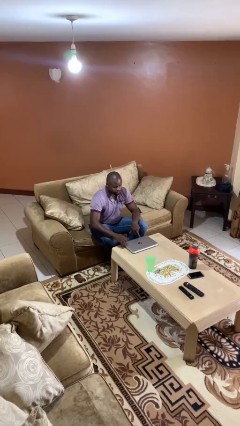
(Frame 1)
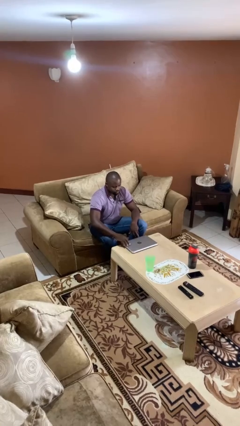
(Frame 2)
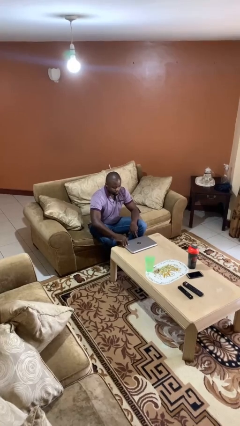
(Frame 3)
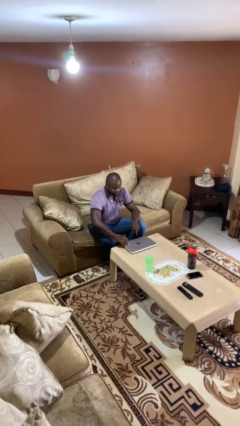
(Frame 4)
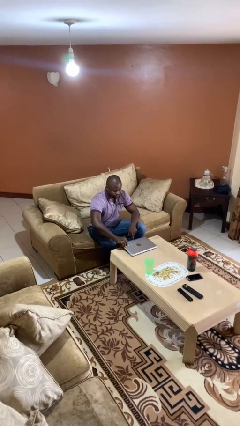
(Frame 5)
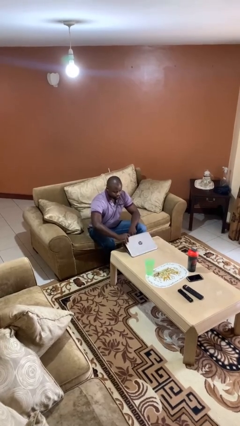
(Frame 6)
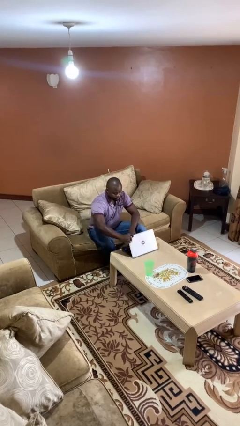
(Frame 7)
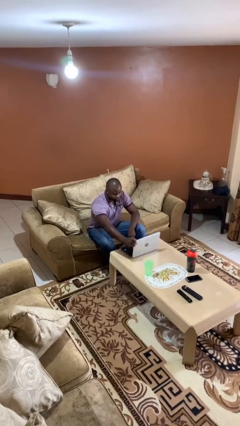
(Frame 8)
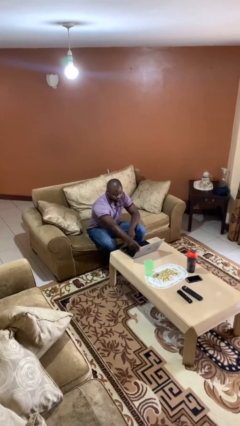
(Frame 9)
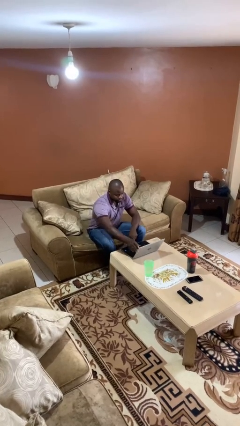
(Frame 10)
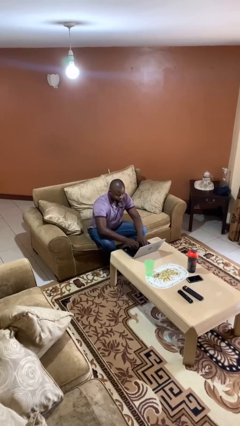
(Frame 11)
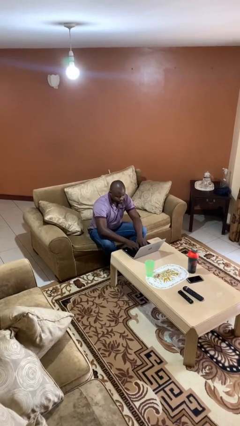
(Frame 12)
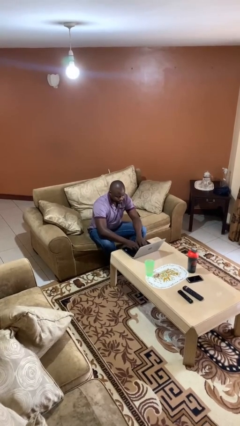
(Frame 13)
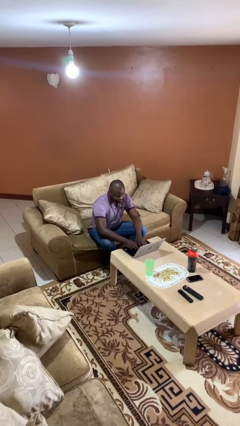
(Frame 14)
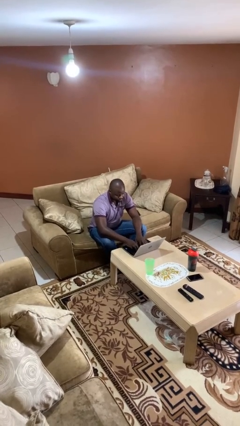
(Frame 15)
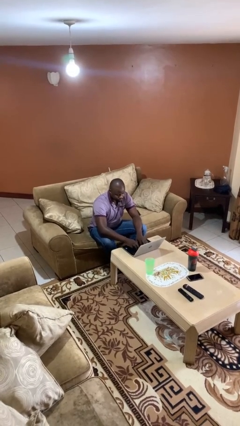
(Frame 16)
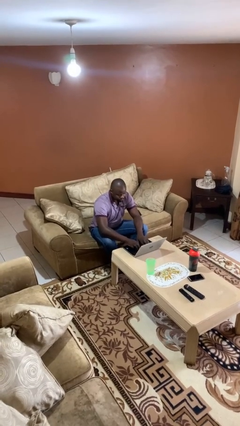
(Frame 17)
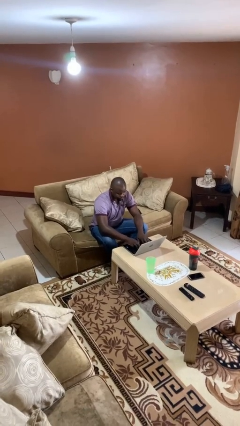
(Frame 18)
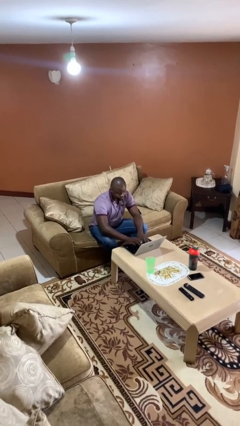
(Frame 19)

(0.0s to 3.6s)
person interacts with laptop

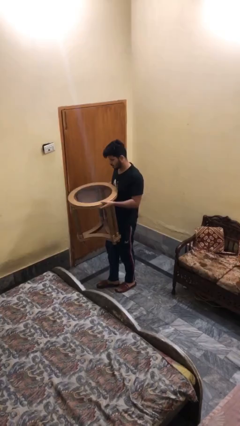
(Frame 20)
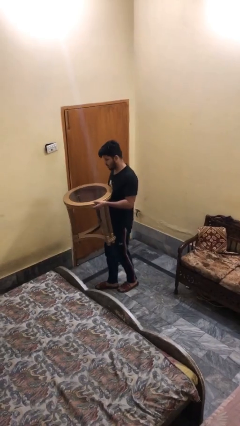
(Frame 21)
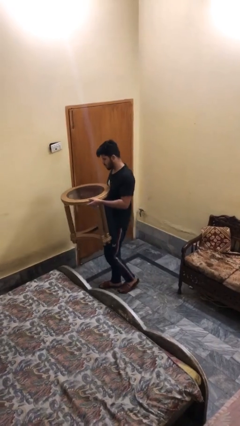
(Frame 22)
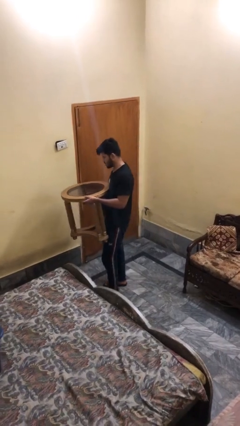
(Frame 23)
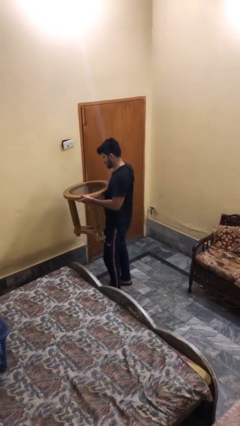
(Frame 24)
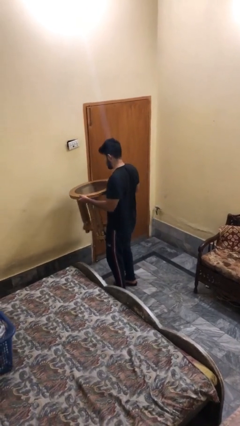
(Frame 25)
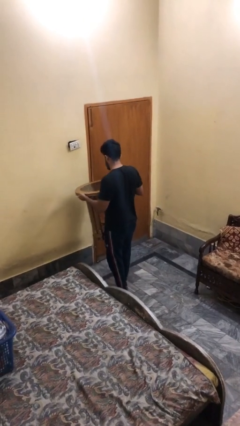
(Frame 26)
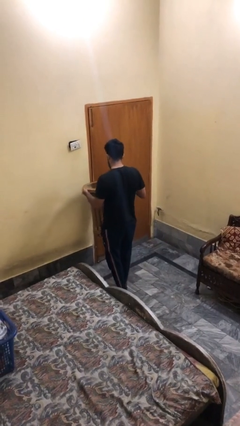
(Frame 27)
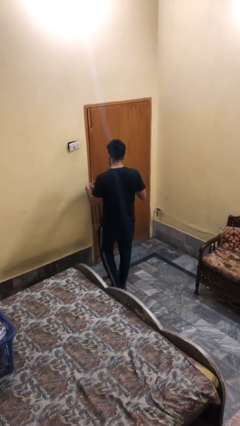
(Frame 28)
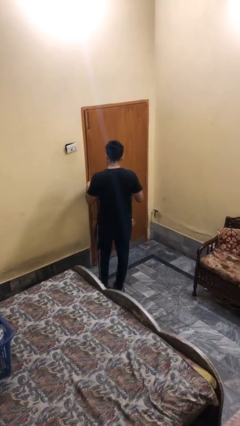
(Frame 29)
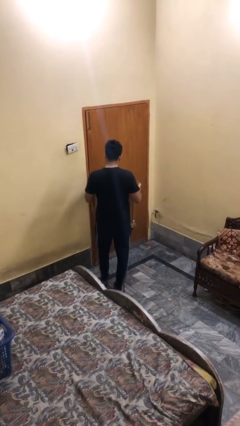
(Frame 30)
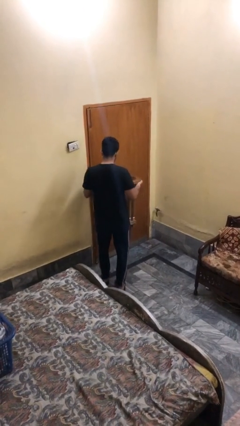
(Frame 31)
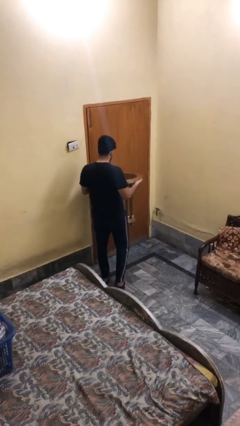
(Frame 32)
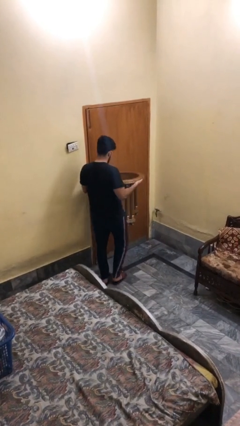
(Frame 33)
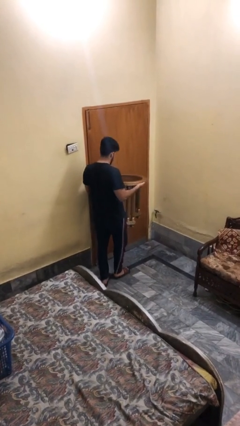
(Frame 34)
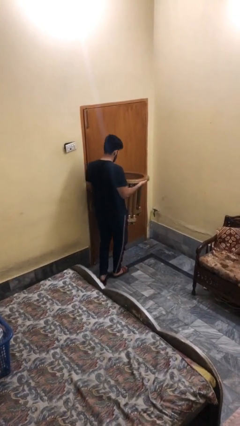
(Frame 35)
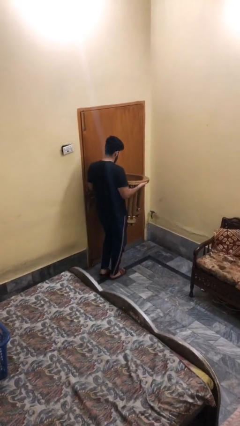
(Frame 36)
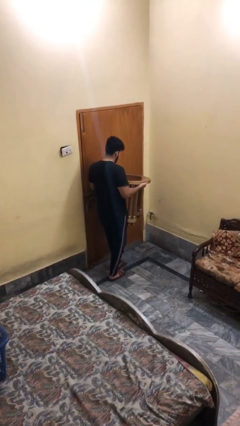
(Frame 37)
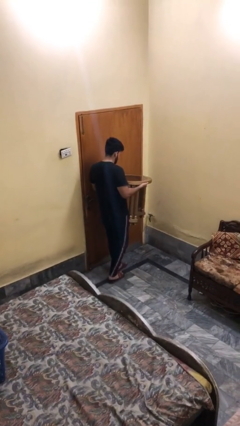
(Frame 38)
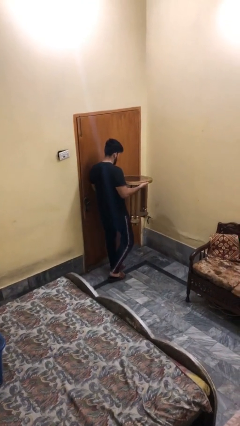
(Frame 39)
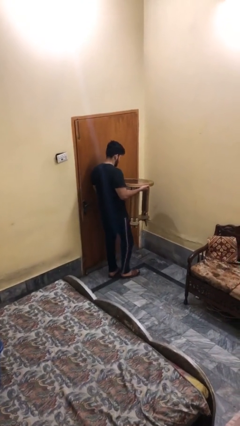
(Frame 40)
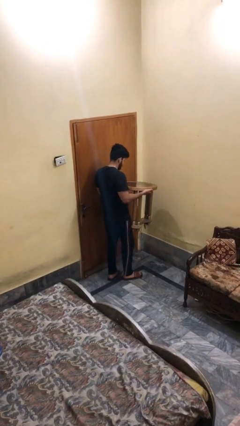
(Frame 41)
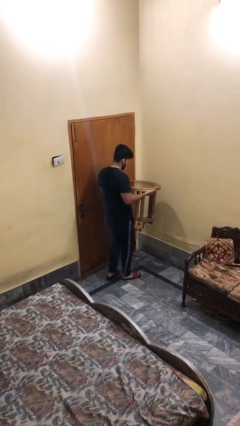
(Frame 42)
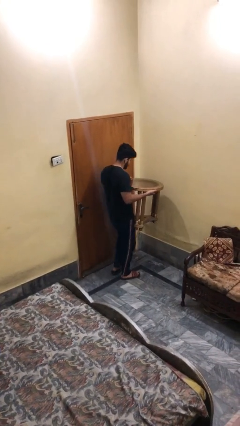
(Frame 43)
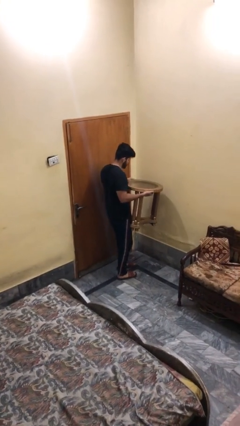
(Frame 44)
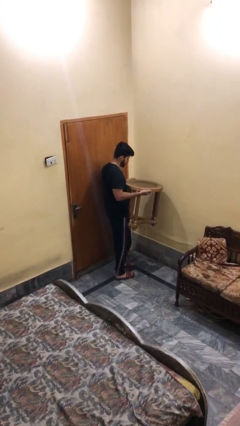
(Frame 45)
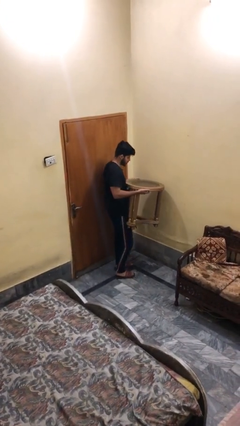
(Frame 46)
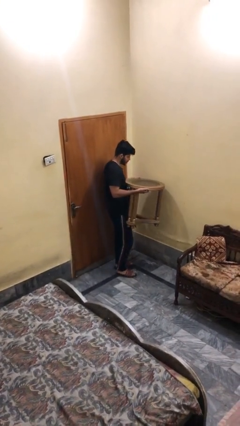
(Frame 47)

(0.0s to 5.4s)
person carries furniture

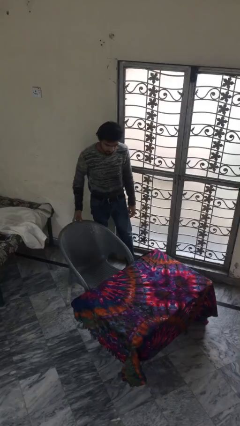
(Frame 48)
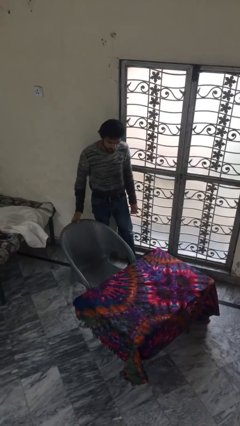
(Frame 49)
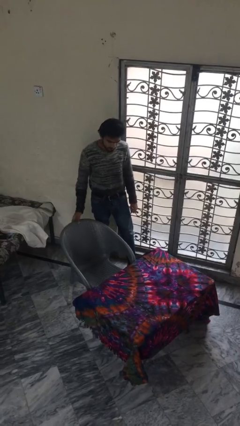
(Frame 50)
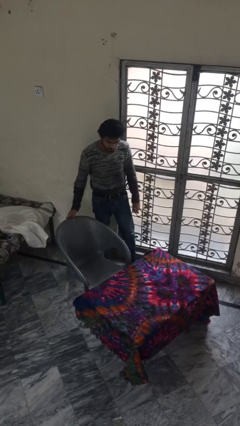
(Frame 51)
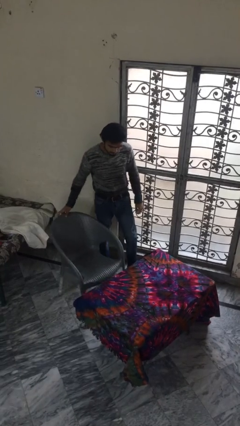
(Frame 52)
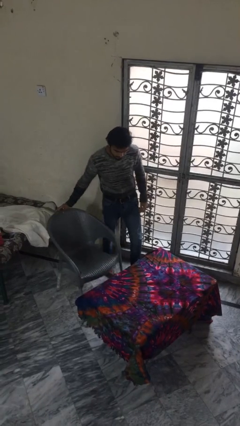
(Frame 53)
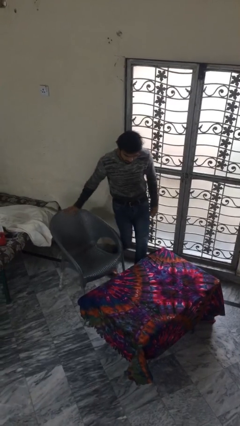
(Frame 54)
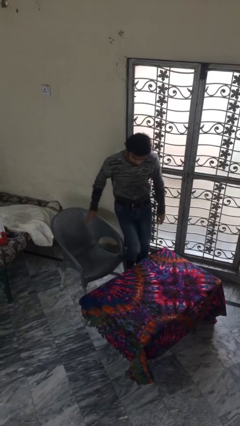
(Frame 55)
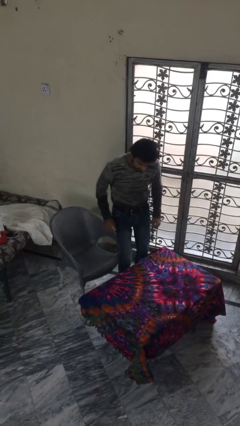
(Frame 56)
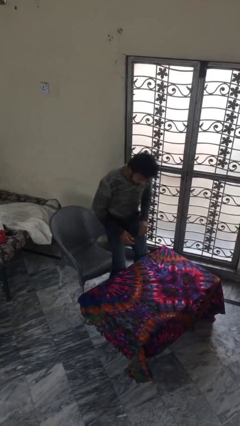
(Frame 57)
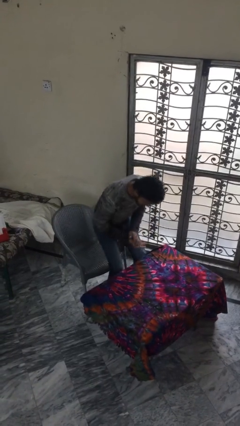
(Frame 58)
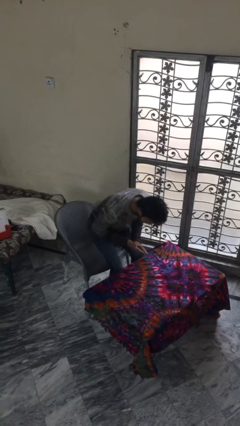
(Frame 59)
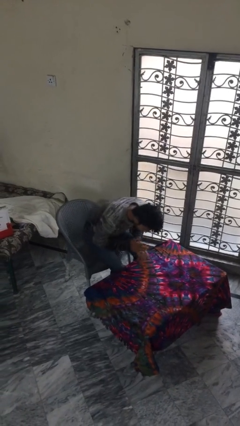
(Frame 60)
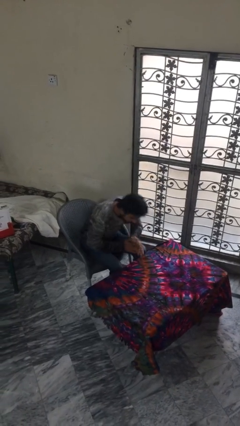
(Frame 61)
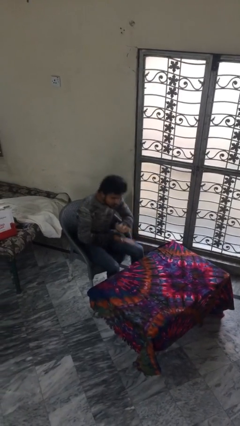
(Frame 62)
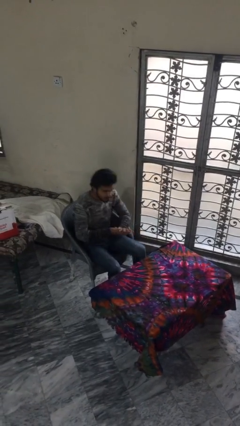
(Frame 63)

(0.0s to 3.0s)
person sits down

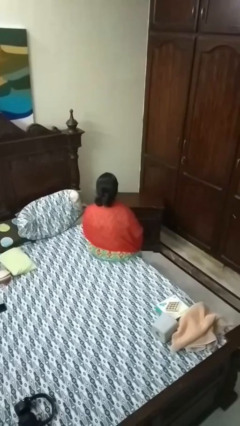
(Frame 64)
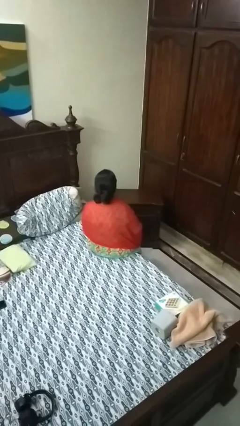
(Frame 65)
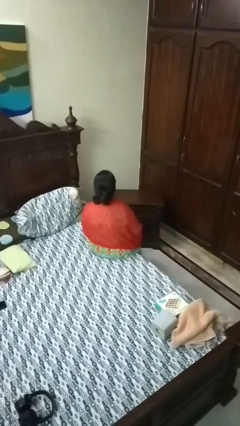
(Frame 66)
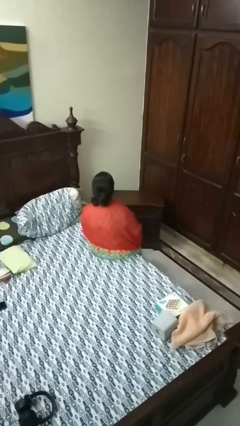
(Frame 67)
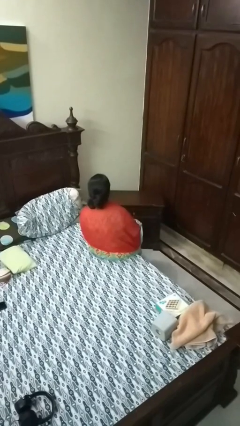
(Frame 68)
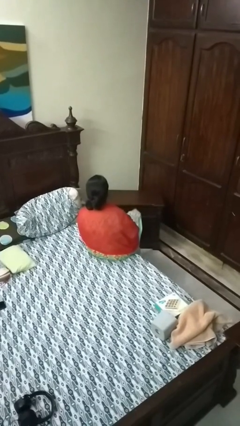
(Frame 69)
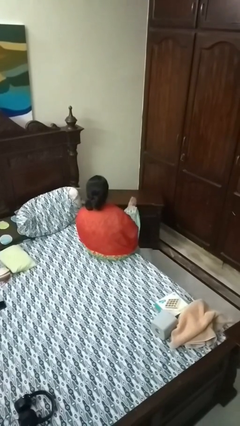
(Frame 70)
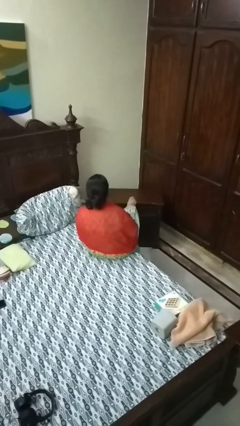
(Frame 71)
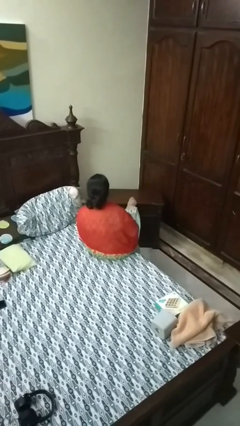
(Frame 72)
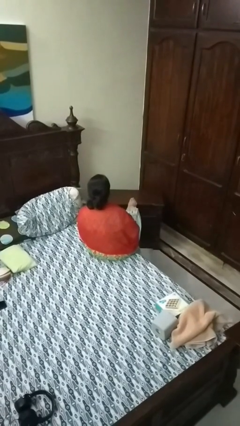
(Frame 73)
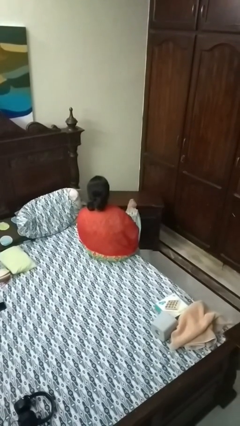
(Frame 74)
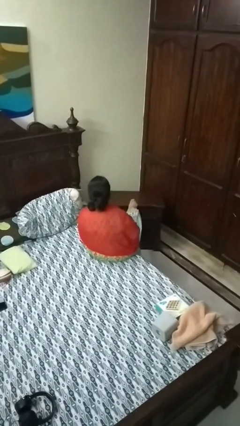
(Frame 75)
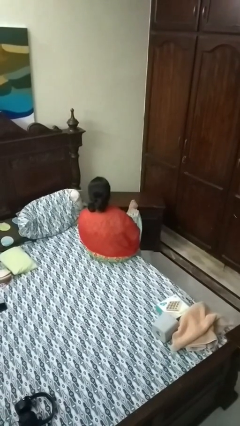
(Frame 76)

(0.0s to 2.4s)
person puts feet up

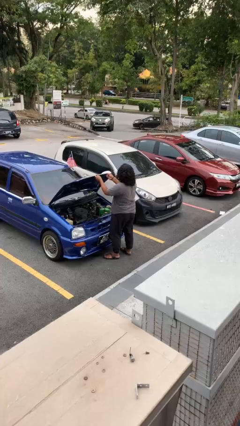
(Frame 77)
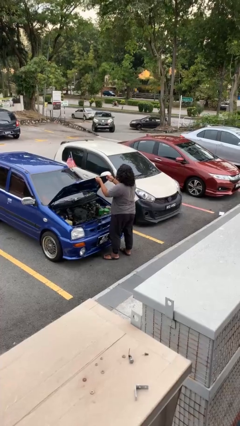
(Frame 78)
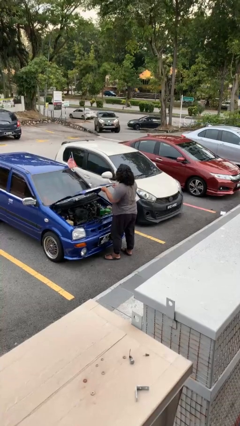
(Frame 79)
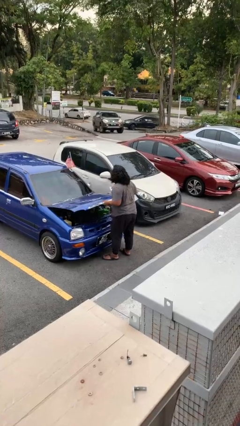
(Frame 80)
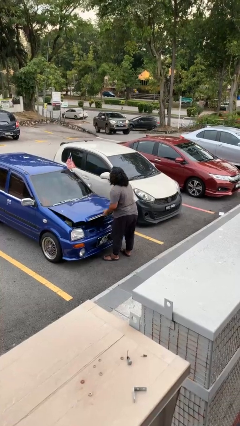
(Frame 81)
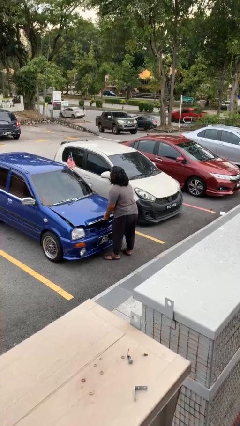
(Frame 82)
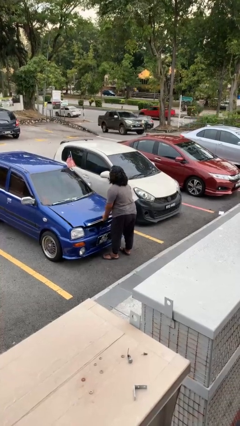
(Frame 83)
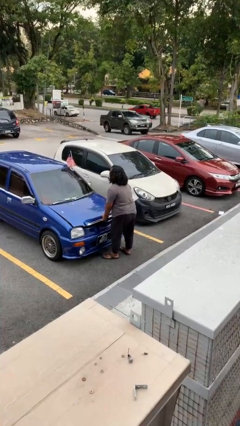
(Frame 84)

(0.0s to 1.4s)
person closes car hood

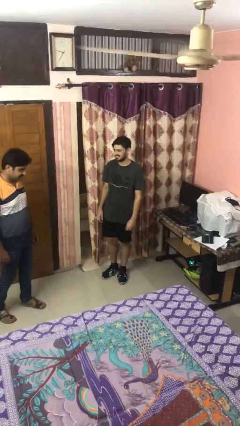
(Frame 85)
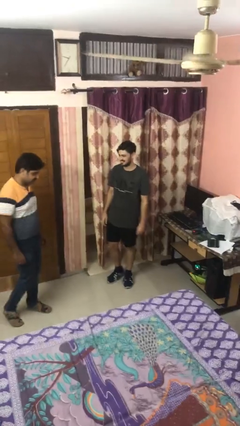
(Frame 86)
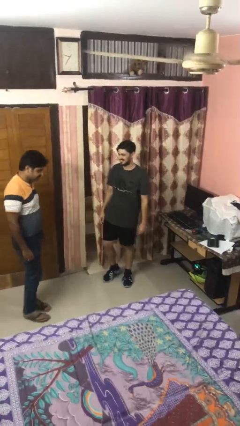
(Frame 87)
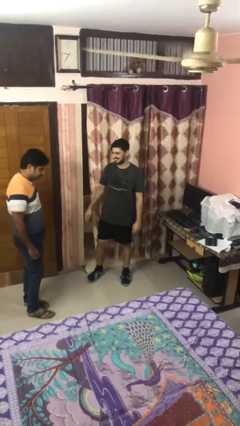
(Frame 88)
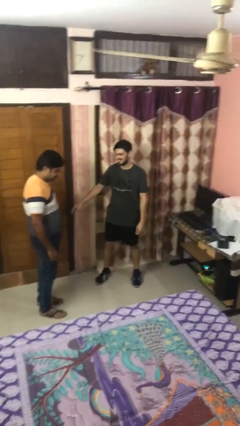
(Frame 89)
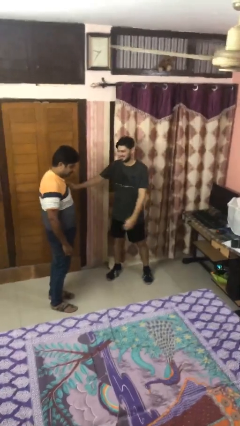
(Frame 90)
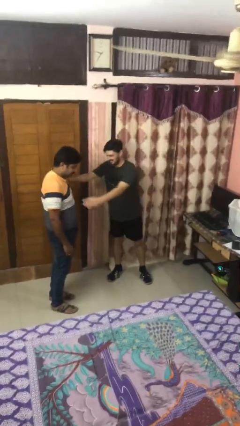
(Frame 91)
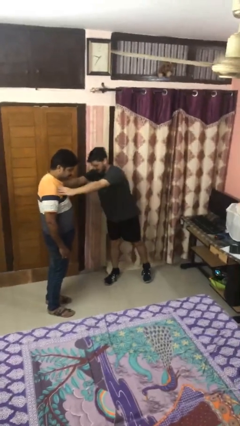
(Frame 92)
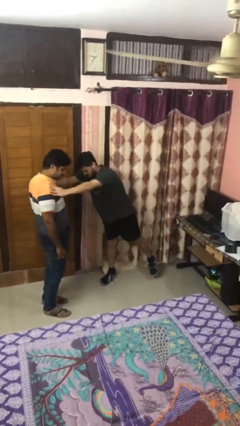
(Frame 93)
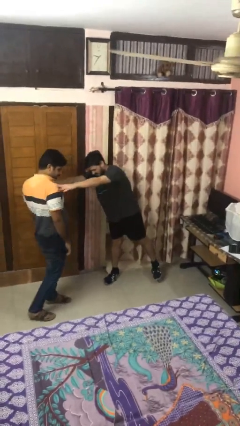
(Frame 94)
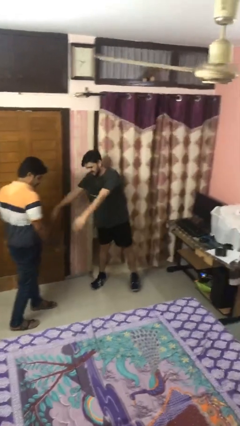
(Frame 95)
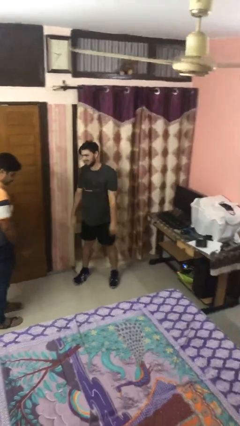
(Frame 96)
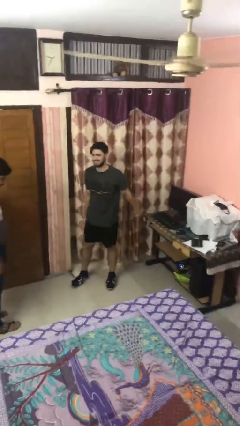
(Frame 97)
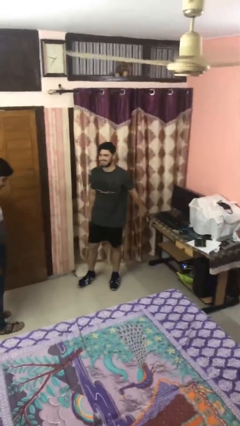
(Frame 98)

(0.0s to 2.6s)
person shoves person
